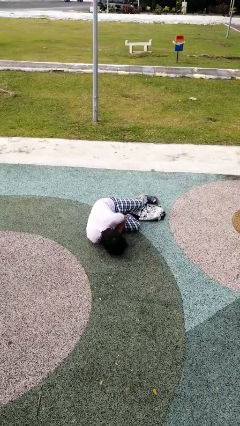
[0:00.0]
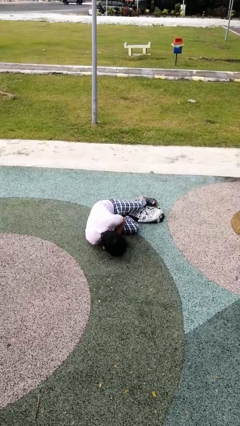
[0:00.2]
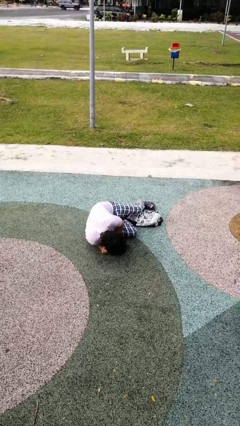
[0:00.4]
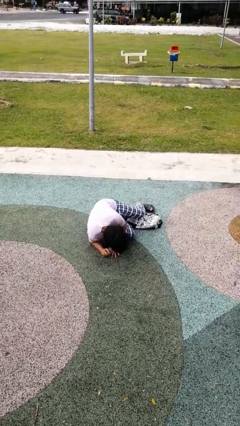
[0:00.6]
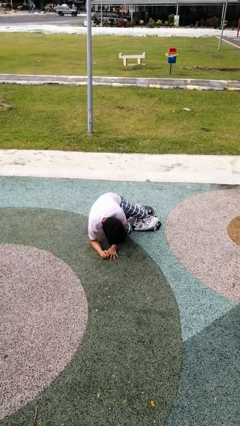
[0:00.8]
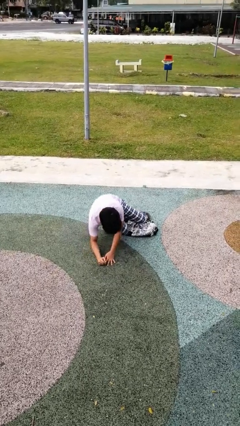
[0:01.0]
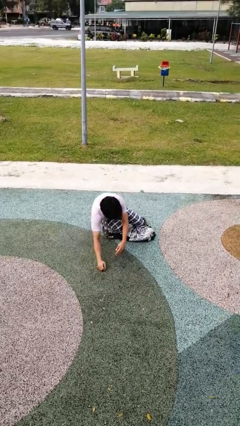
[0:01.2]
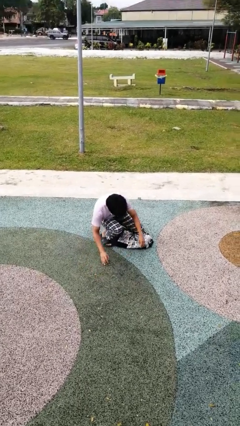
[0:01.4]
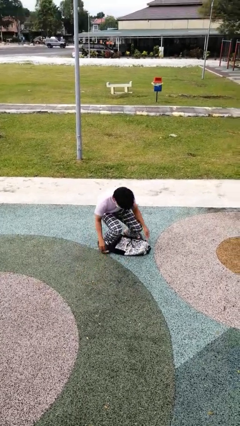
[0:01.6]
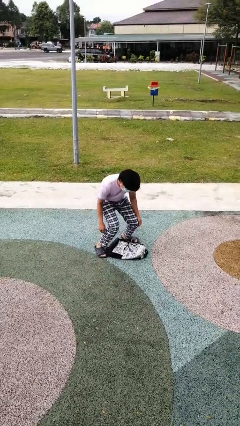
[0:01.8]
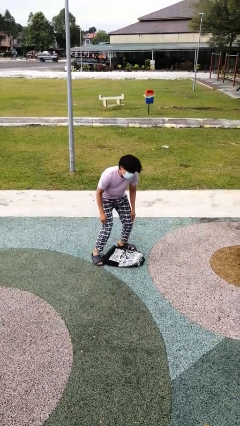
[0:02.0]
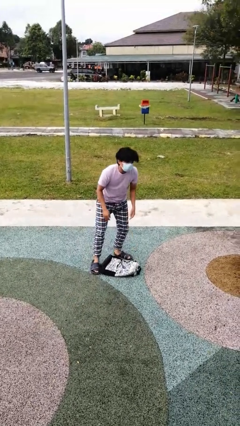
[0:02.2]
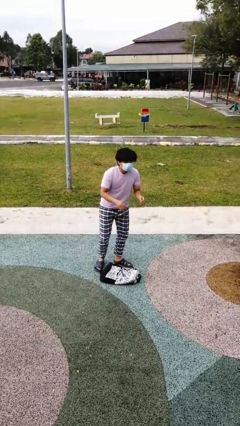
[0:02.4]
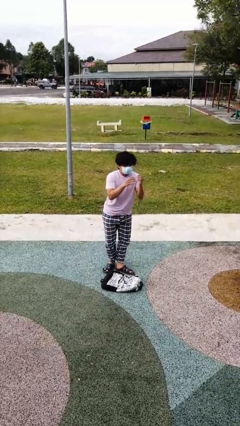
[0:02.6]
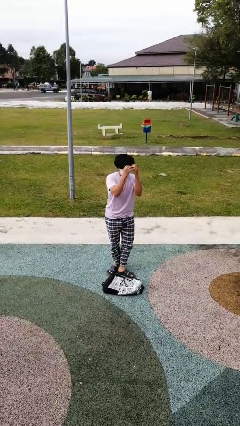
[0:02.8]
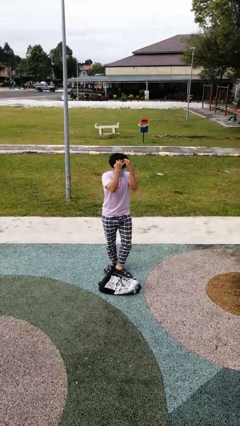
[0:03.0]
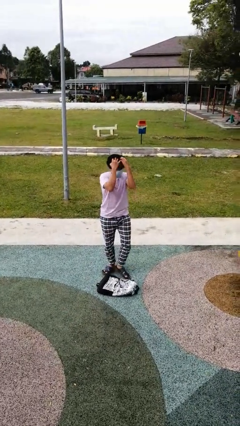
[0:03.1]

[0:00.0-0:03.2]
person stands up from floor

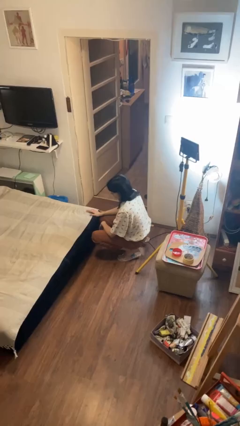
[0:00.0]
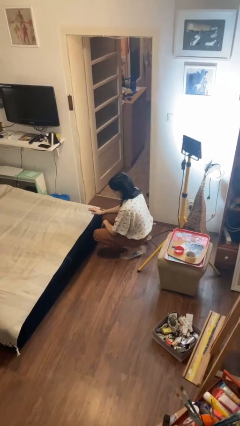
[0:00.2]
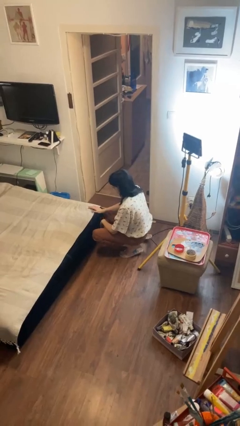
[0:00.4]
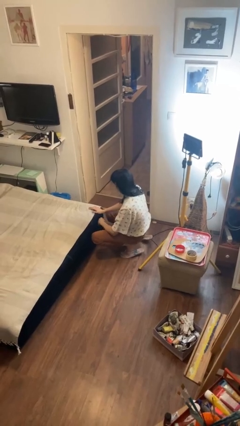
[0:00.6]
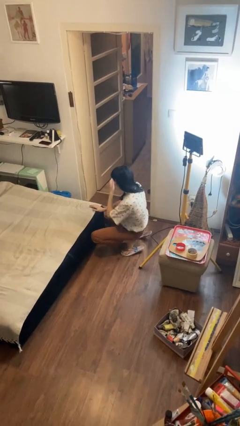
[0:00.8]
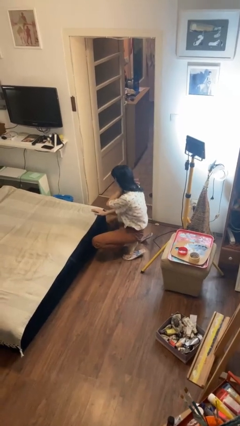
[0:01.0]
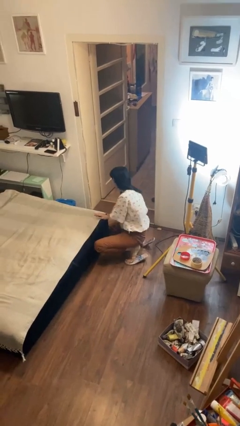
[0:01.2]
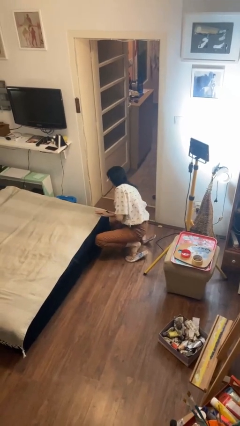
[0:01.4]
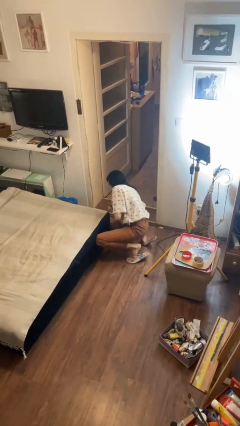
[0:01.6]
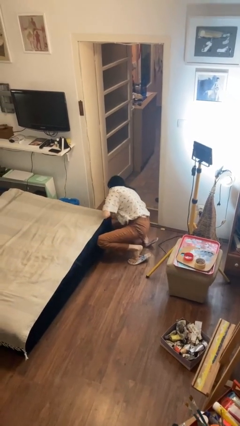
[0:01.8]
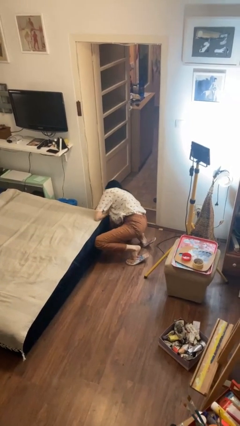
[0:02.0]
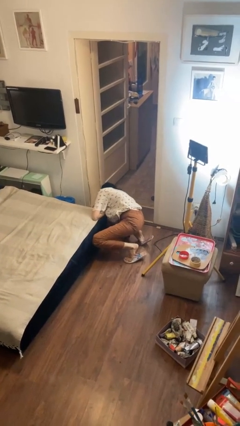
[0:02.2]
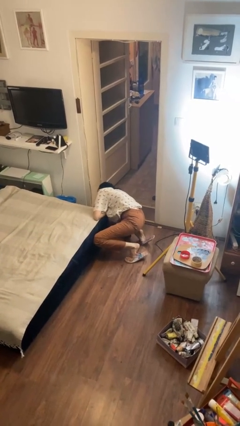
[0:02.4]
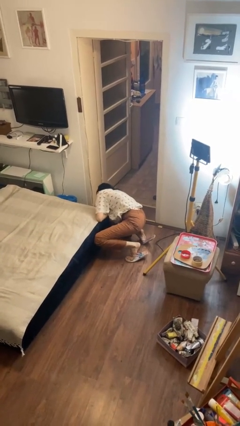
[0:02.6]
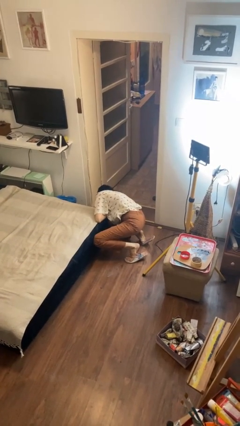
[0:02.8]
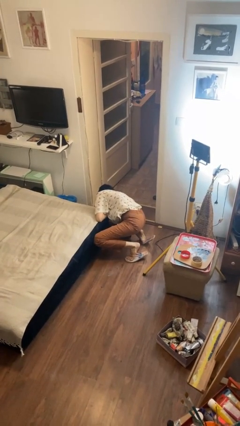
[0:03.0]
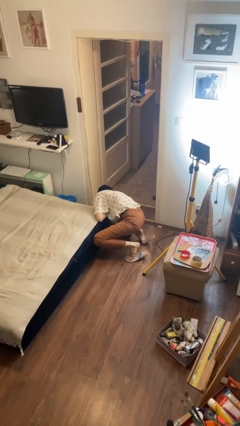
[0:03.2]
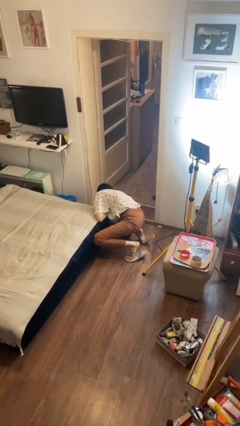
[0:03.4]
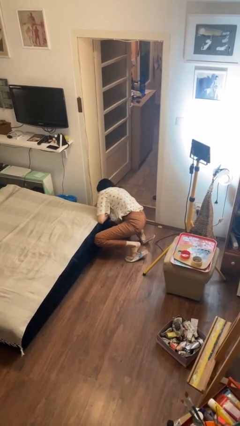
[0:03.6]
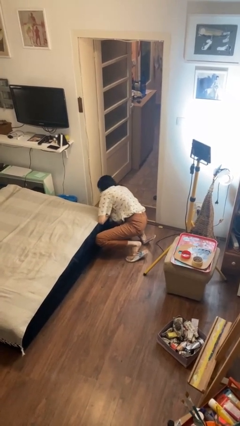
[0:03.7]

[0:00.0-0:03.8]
person searches under bed

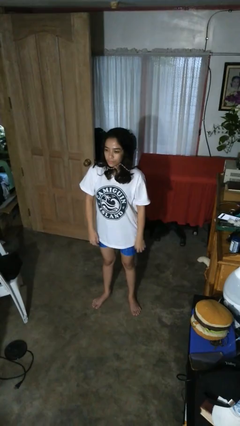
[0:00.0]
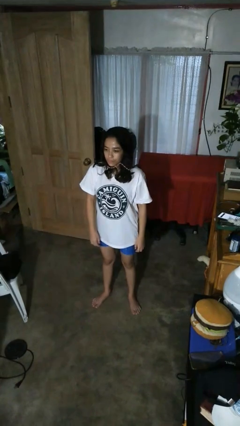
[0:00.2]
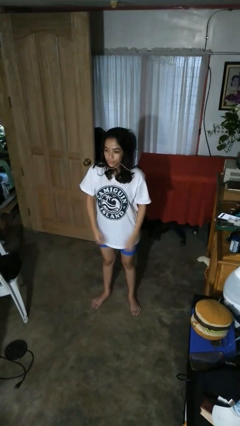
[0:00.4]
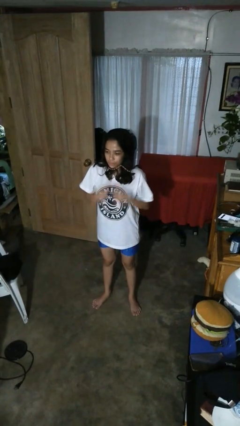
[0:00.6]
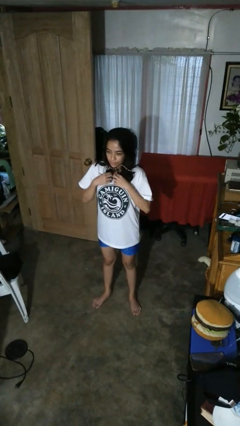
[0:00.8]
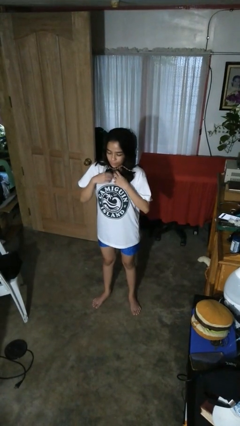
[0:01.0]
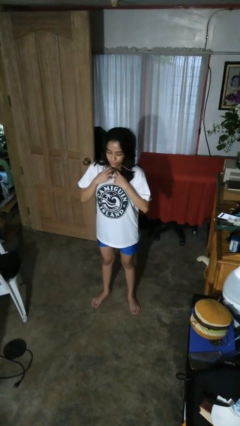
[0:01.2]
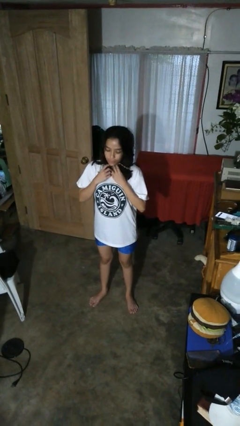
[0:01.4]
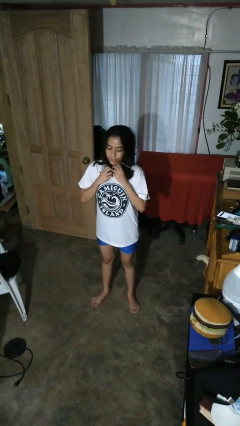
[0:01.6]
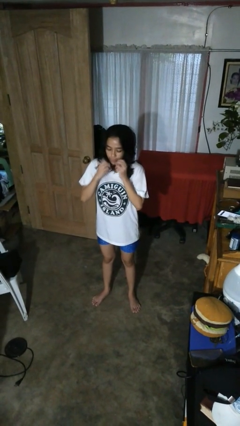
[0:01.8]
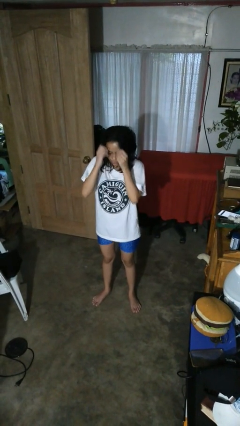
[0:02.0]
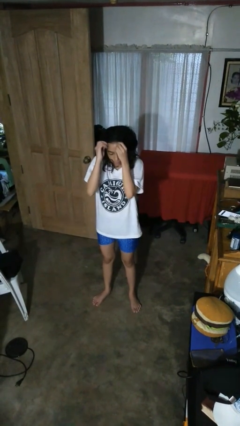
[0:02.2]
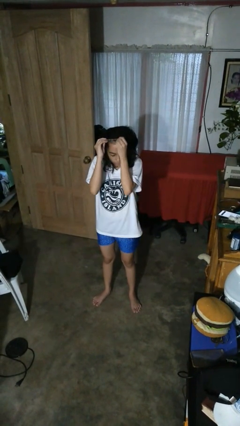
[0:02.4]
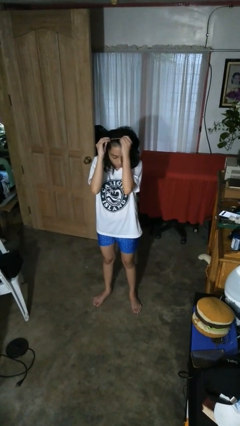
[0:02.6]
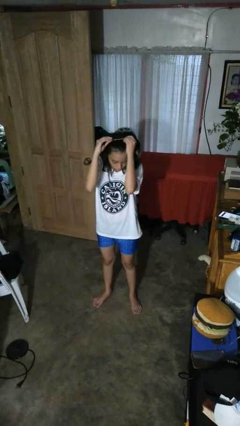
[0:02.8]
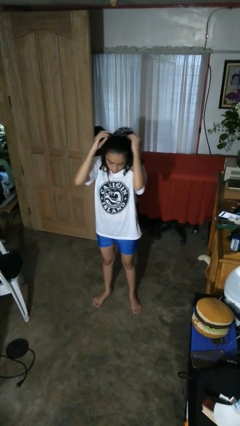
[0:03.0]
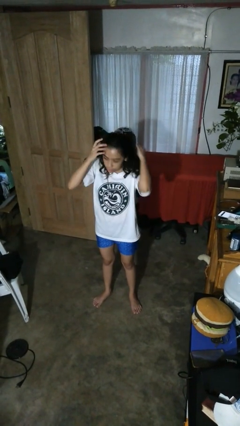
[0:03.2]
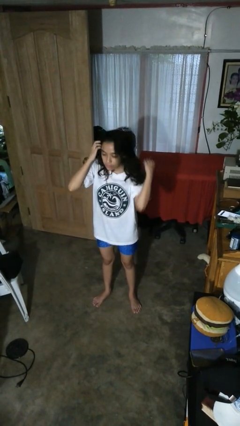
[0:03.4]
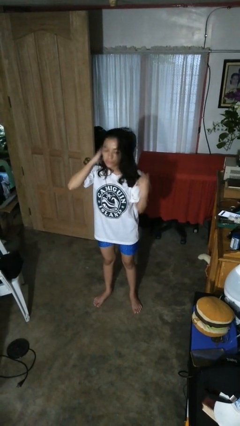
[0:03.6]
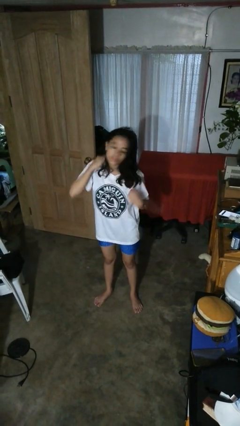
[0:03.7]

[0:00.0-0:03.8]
person takes off necklace

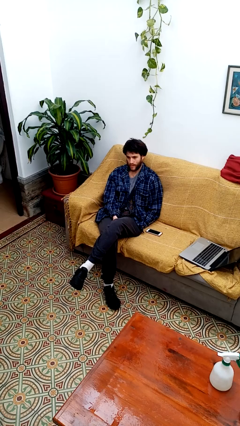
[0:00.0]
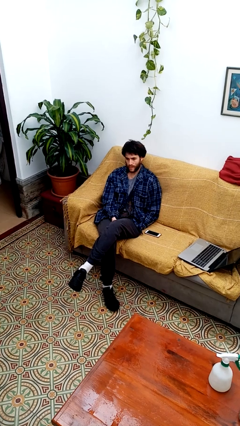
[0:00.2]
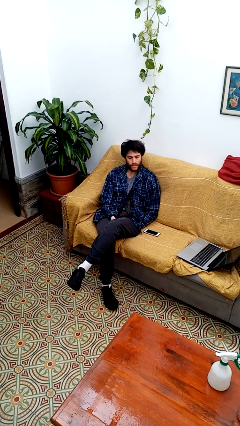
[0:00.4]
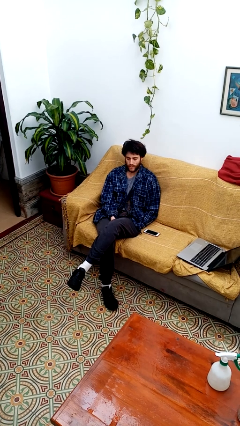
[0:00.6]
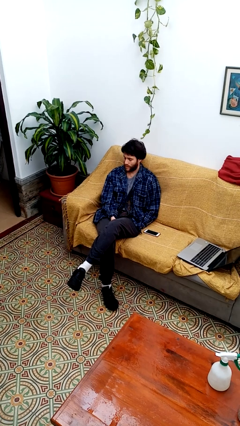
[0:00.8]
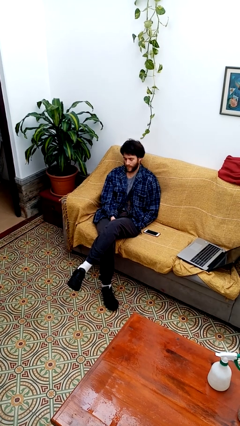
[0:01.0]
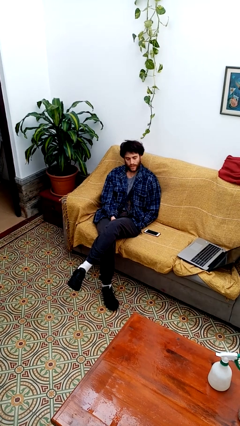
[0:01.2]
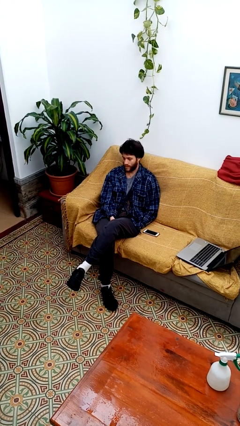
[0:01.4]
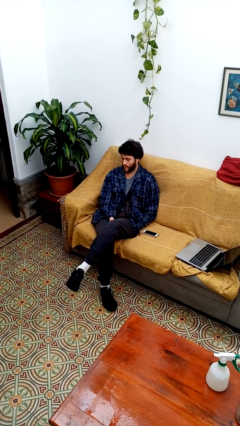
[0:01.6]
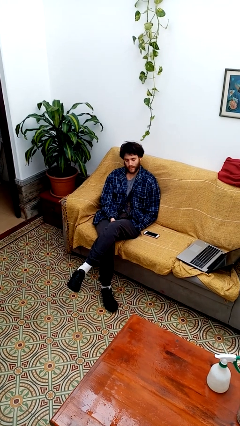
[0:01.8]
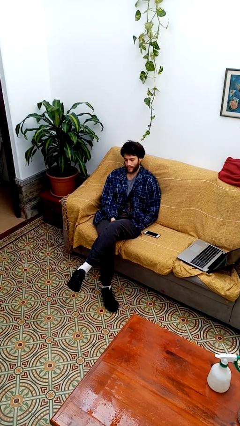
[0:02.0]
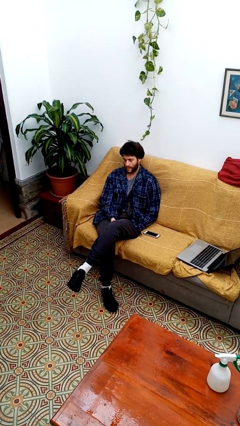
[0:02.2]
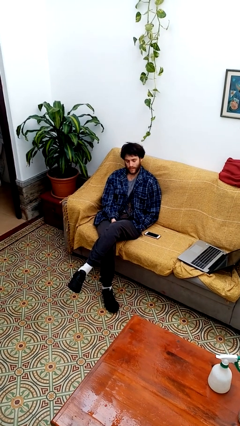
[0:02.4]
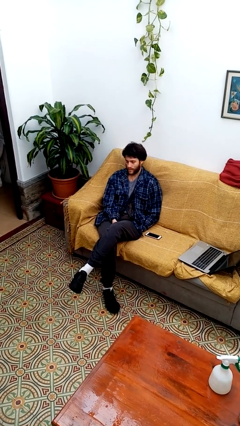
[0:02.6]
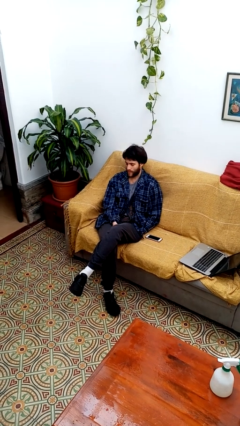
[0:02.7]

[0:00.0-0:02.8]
person shakes head

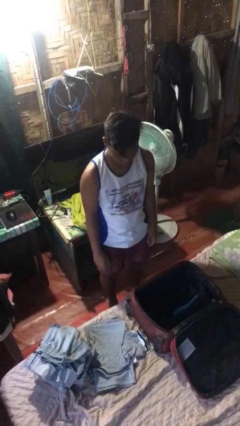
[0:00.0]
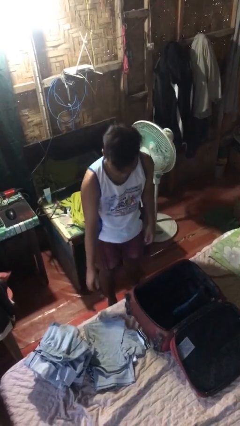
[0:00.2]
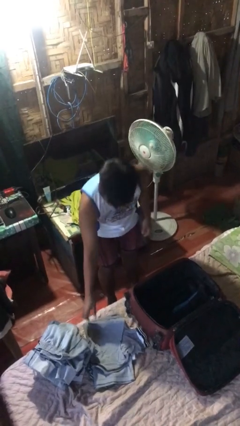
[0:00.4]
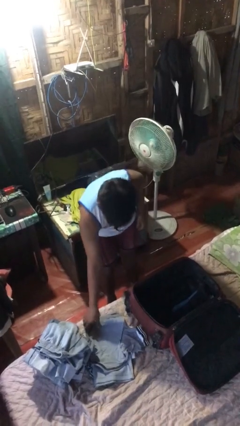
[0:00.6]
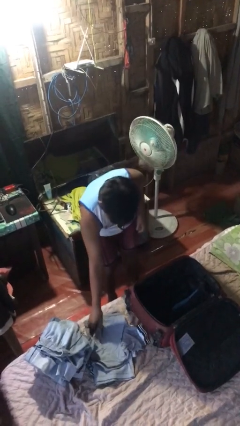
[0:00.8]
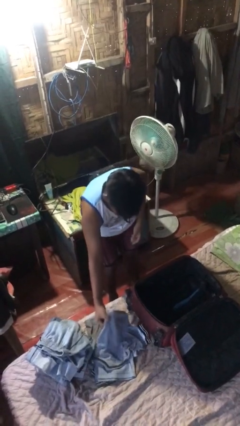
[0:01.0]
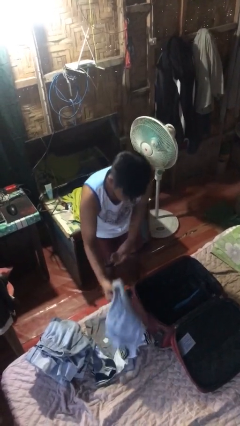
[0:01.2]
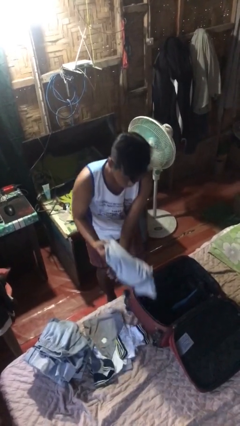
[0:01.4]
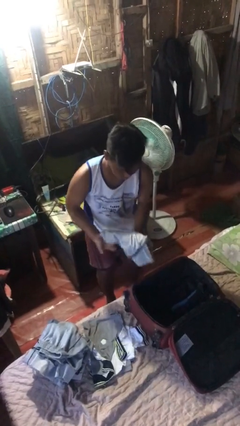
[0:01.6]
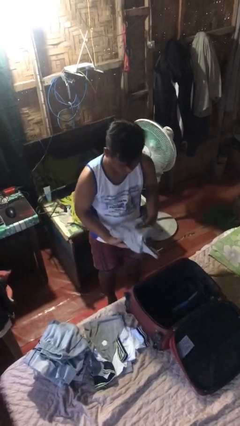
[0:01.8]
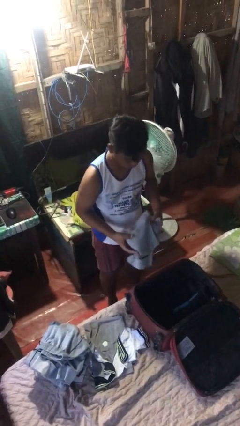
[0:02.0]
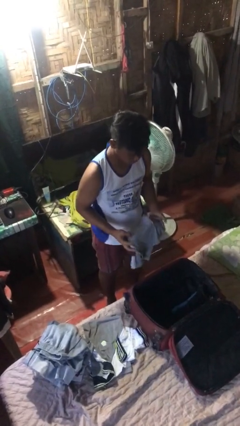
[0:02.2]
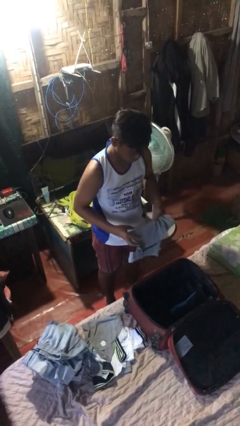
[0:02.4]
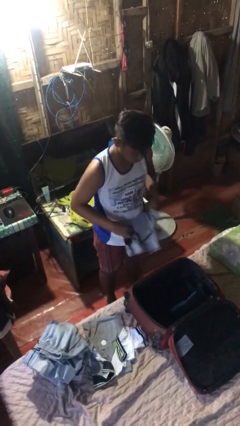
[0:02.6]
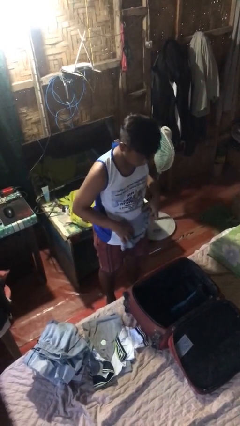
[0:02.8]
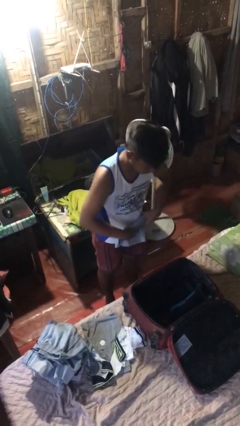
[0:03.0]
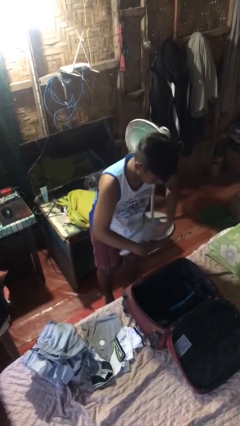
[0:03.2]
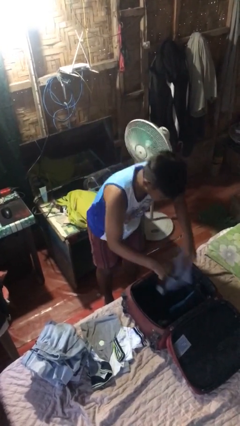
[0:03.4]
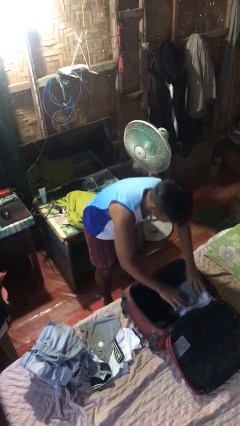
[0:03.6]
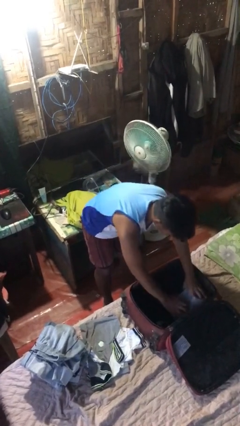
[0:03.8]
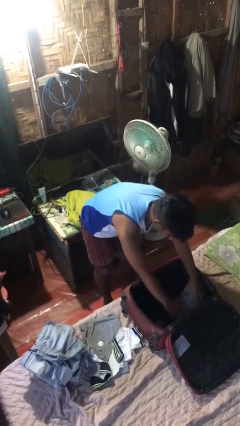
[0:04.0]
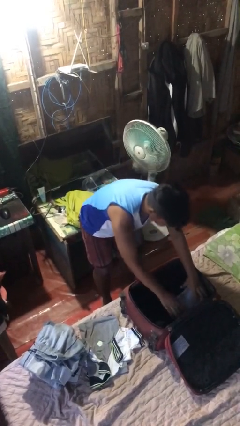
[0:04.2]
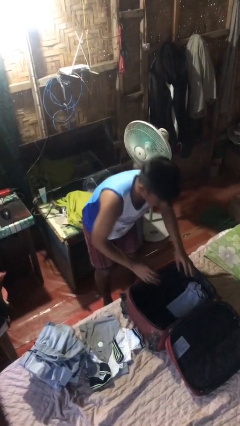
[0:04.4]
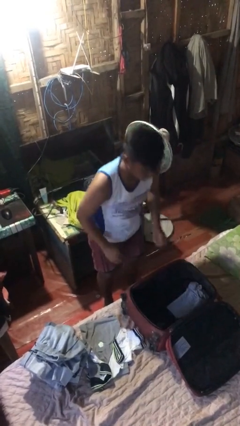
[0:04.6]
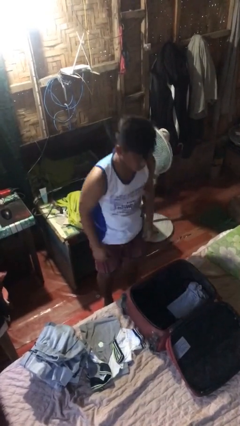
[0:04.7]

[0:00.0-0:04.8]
person loads clothes into suitcase
